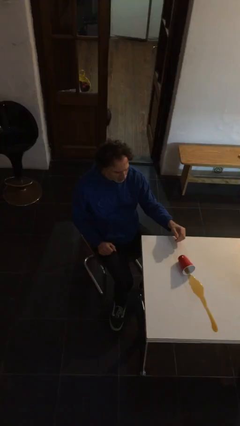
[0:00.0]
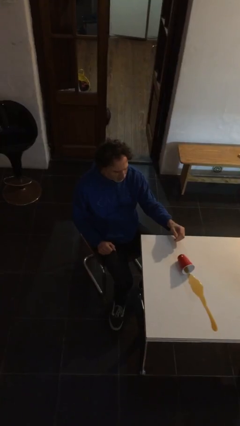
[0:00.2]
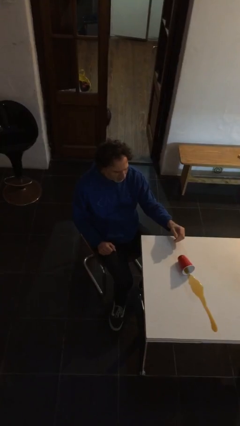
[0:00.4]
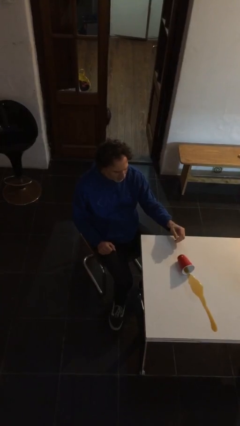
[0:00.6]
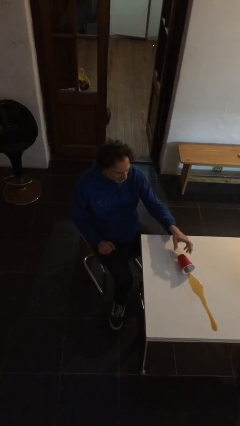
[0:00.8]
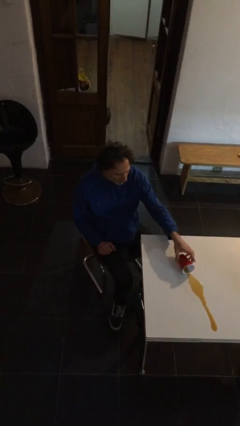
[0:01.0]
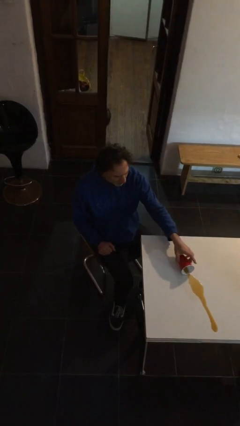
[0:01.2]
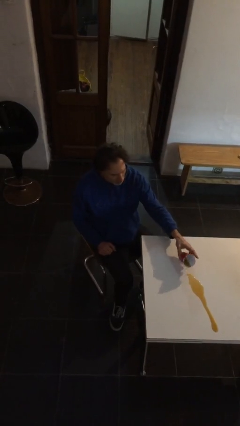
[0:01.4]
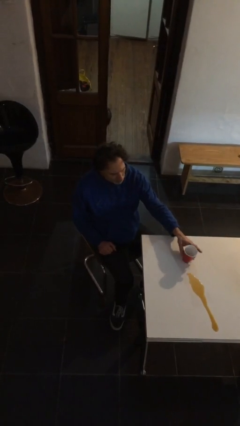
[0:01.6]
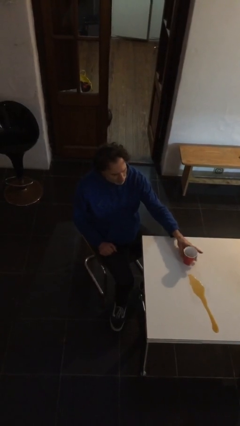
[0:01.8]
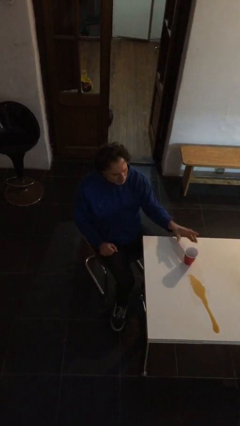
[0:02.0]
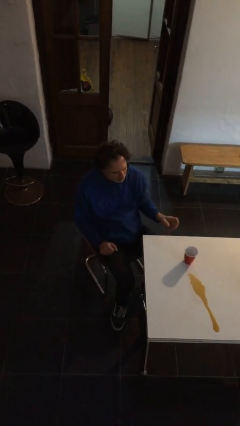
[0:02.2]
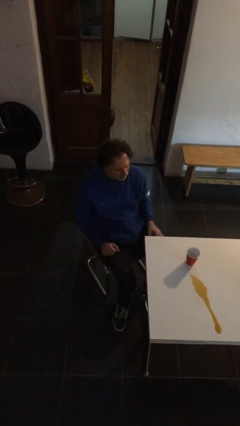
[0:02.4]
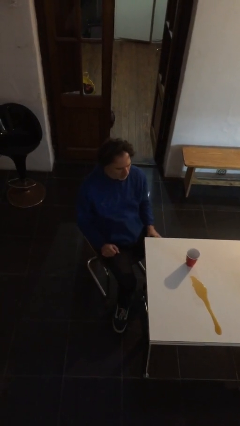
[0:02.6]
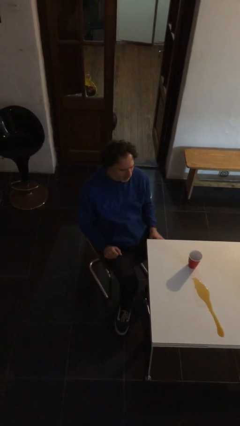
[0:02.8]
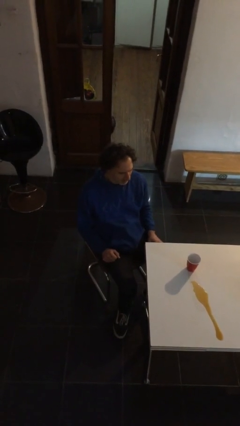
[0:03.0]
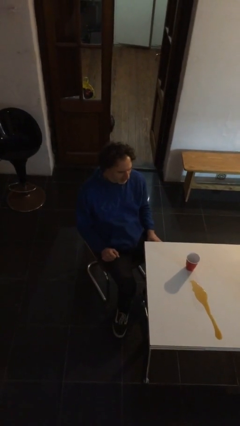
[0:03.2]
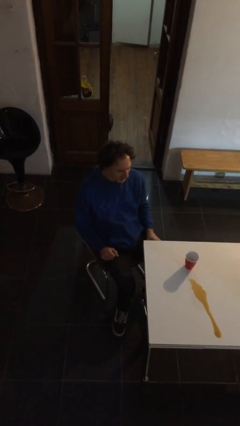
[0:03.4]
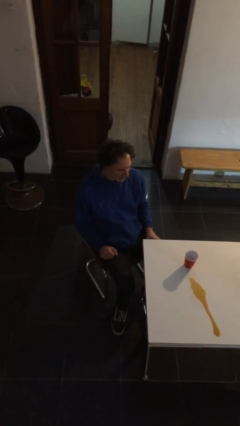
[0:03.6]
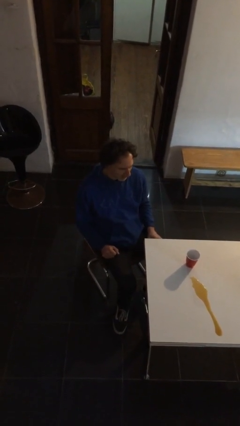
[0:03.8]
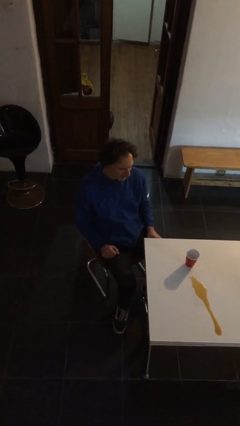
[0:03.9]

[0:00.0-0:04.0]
person sets upright glass

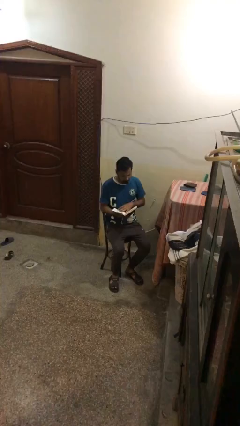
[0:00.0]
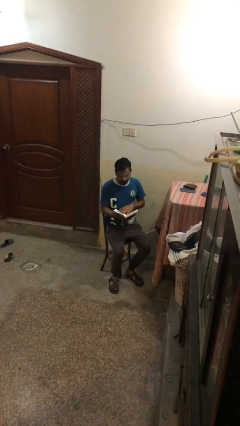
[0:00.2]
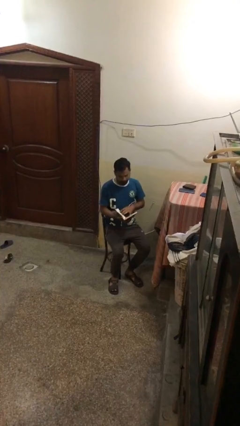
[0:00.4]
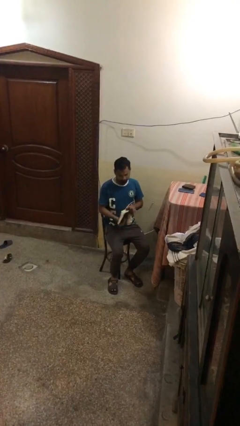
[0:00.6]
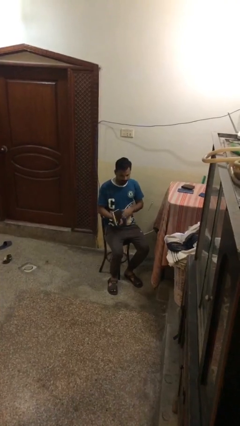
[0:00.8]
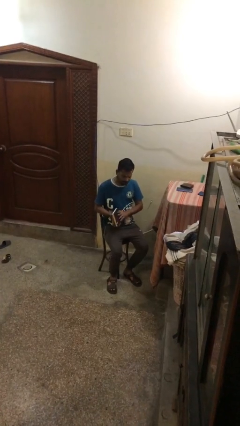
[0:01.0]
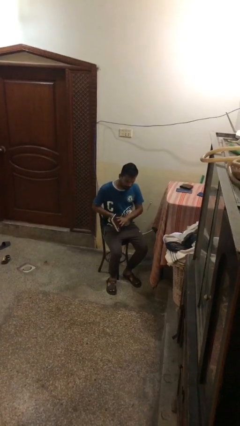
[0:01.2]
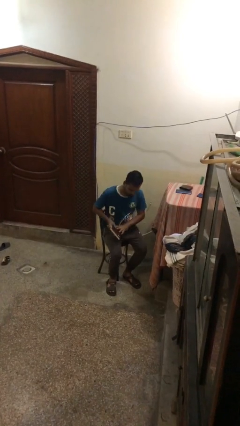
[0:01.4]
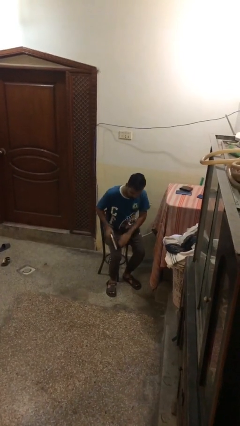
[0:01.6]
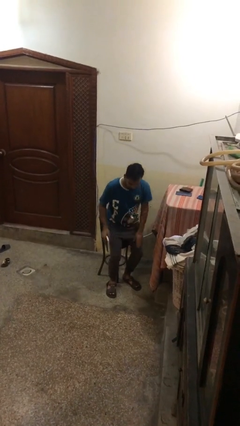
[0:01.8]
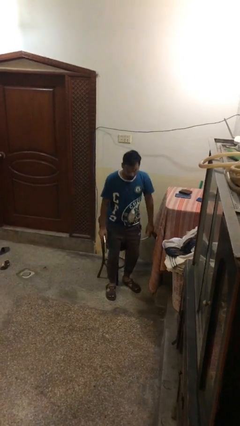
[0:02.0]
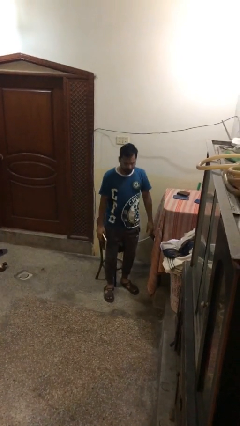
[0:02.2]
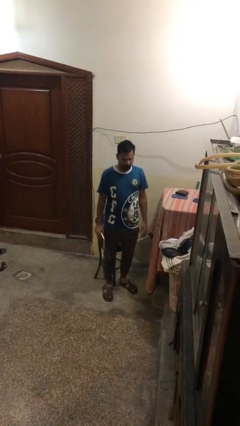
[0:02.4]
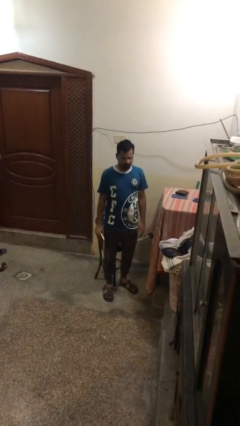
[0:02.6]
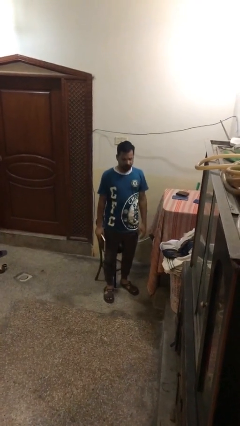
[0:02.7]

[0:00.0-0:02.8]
person stands up

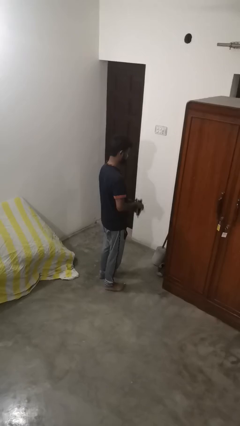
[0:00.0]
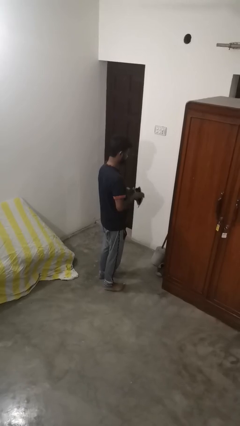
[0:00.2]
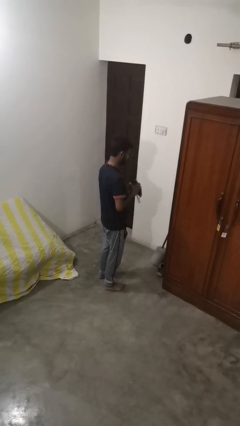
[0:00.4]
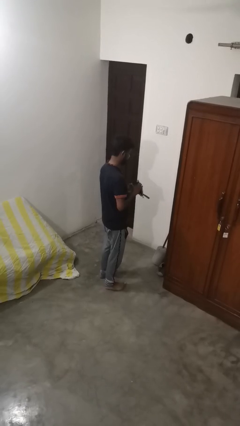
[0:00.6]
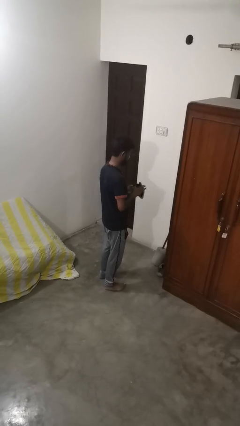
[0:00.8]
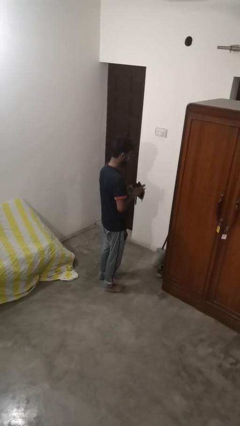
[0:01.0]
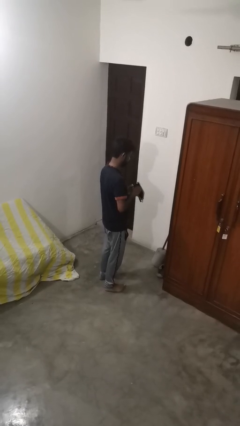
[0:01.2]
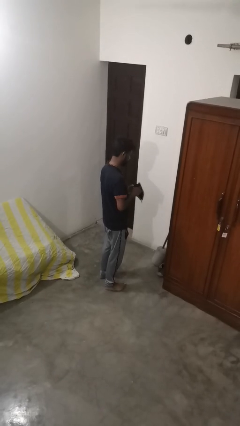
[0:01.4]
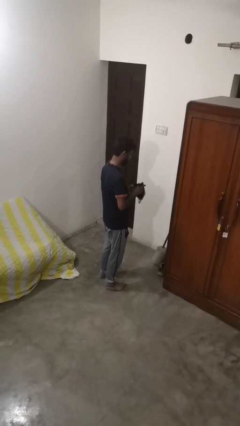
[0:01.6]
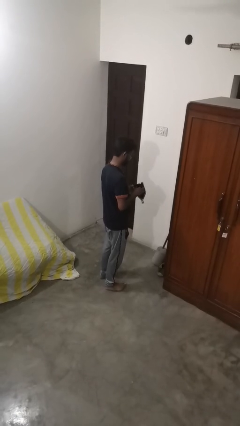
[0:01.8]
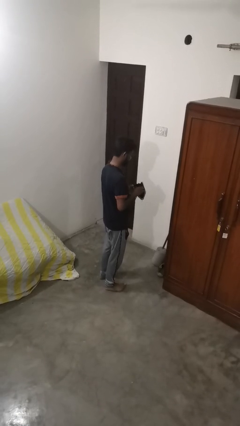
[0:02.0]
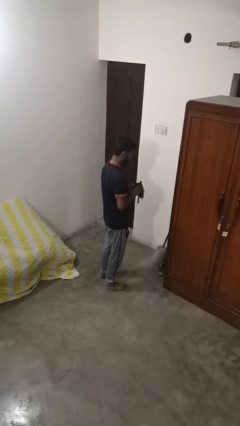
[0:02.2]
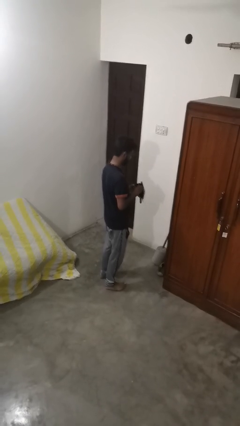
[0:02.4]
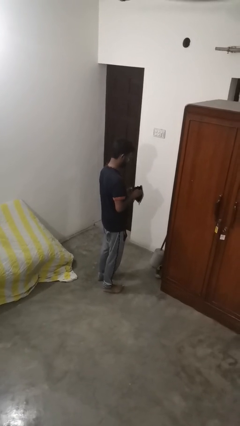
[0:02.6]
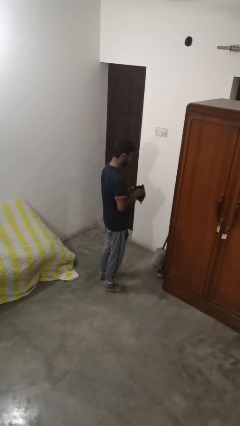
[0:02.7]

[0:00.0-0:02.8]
person searches in purse

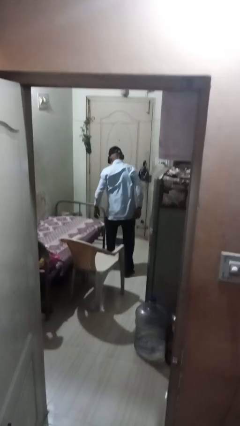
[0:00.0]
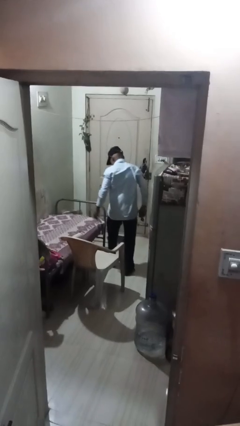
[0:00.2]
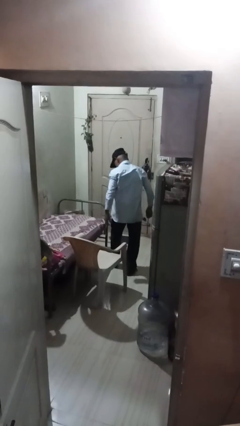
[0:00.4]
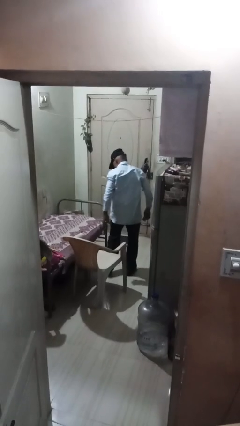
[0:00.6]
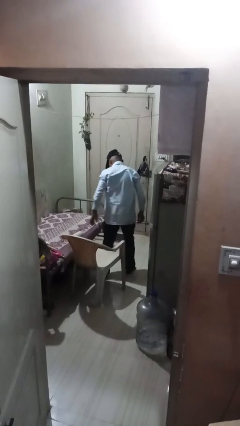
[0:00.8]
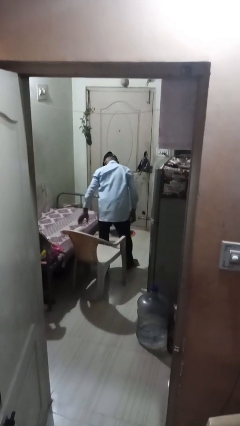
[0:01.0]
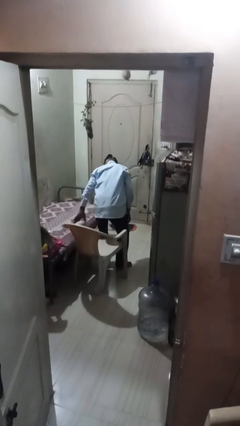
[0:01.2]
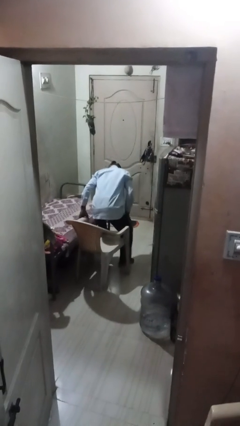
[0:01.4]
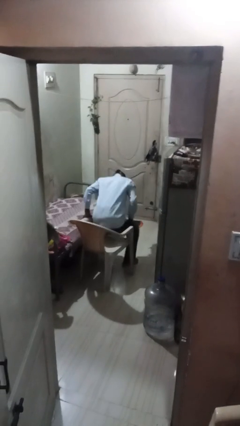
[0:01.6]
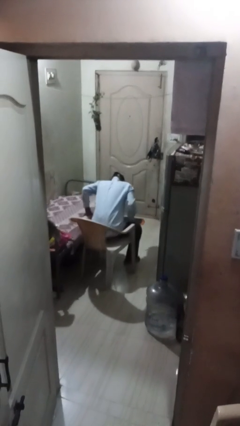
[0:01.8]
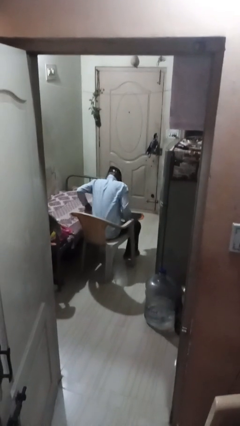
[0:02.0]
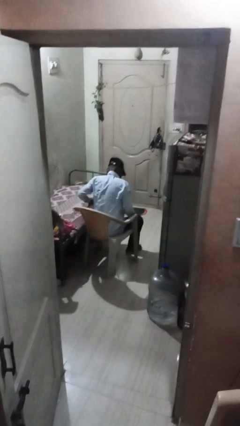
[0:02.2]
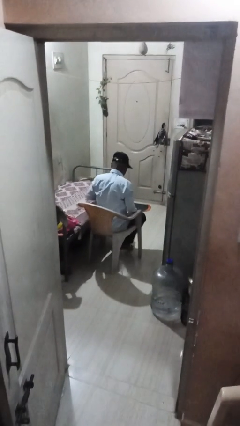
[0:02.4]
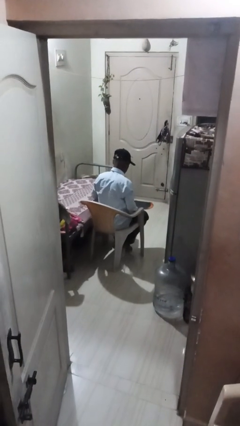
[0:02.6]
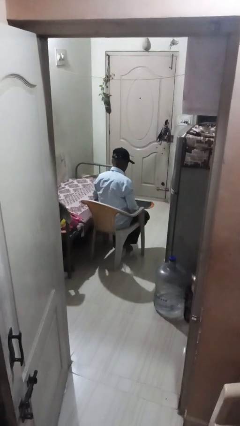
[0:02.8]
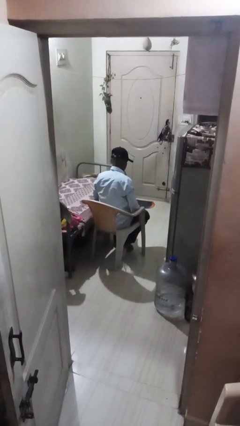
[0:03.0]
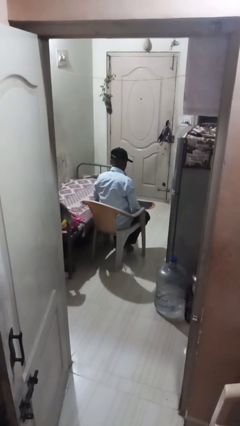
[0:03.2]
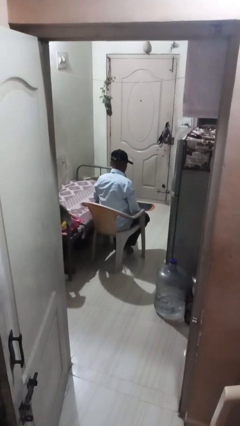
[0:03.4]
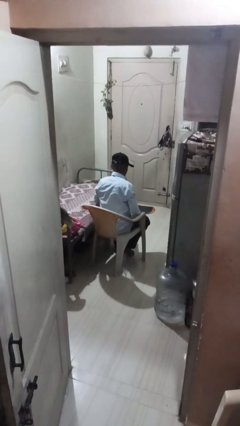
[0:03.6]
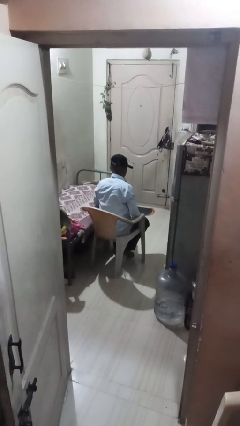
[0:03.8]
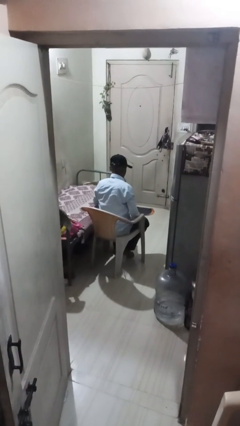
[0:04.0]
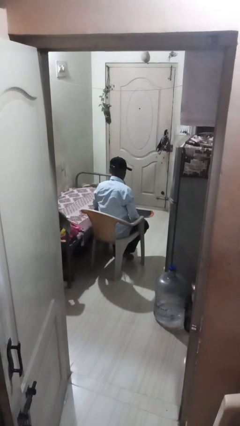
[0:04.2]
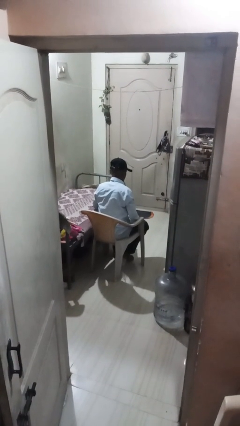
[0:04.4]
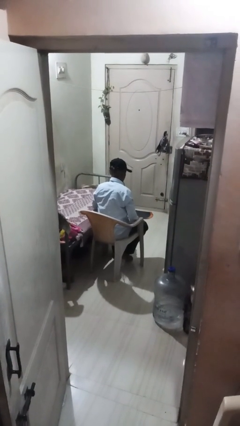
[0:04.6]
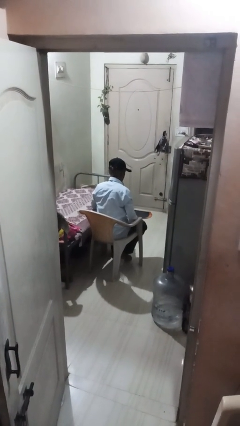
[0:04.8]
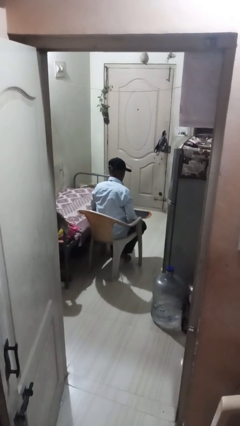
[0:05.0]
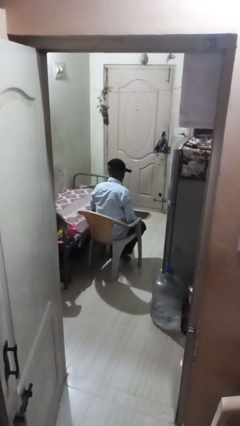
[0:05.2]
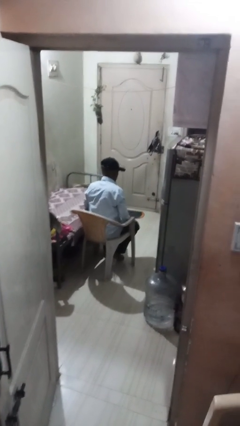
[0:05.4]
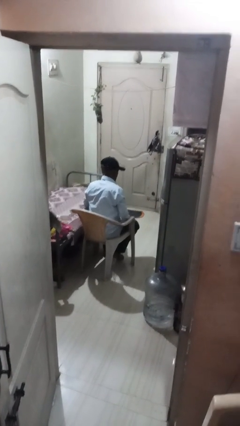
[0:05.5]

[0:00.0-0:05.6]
person sits down

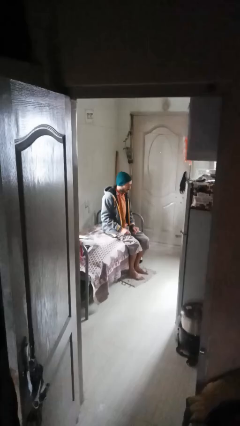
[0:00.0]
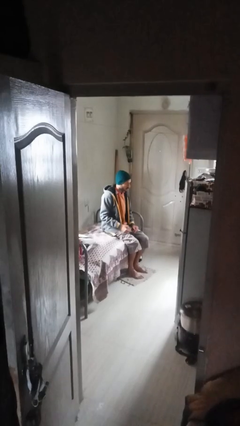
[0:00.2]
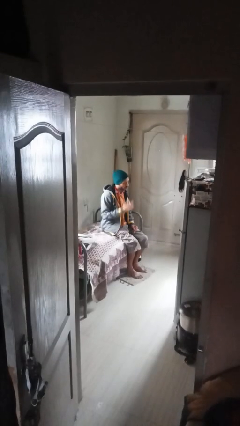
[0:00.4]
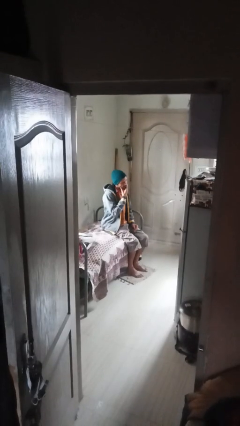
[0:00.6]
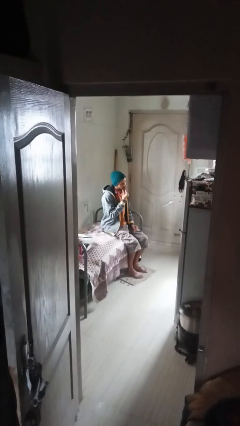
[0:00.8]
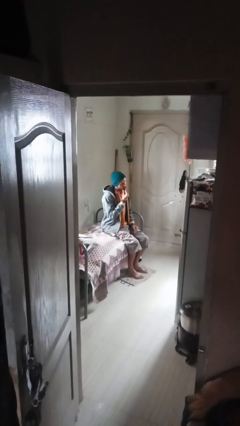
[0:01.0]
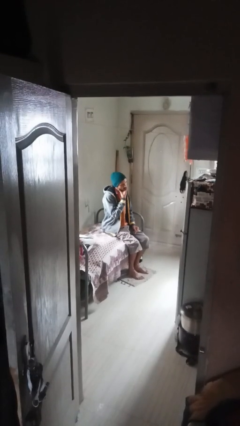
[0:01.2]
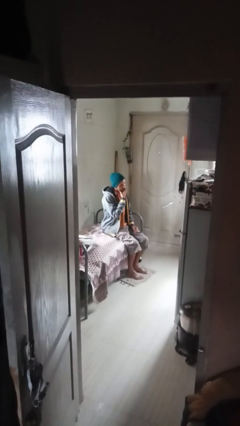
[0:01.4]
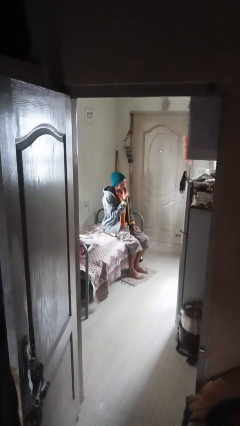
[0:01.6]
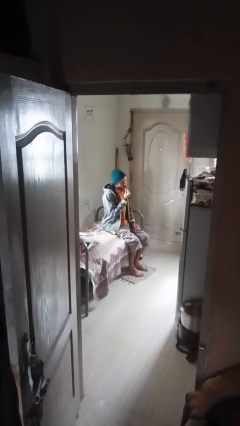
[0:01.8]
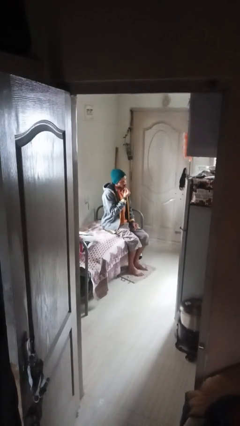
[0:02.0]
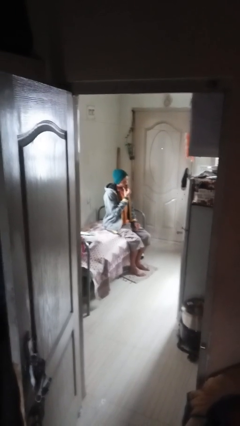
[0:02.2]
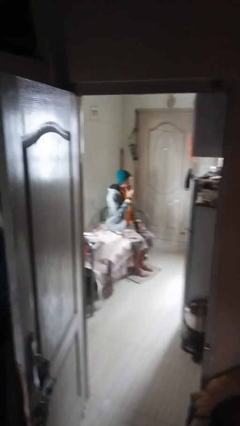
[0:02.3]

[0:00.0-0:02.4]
person strokes chin
